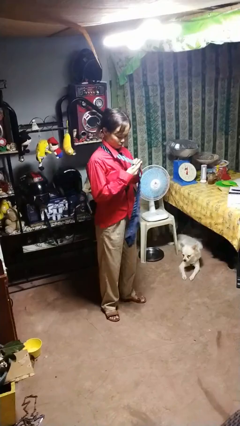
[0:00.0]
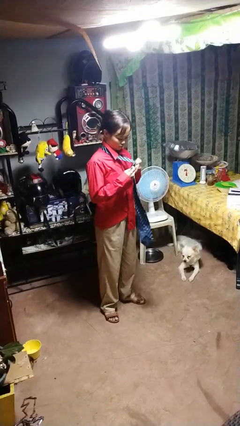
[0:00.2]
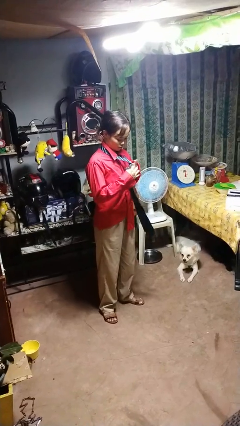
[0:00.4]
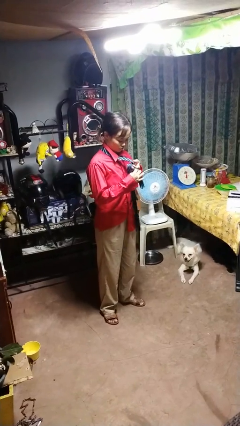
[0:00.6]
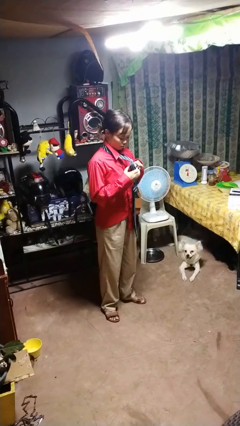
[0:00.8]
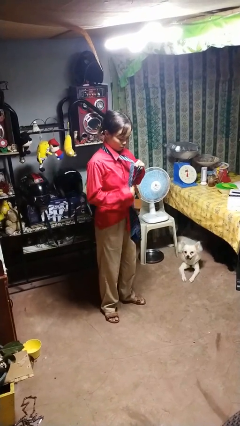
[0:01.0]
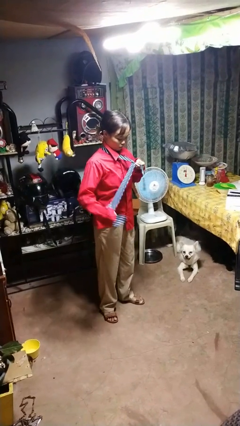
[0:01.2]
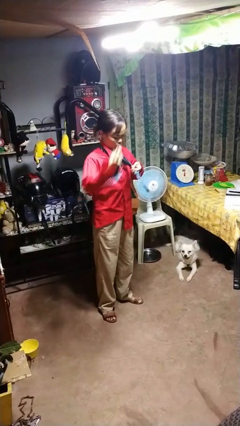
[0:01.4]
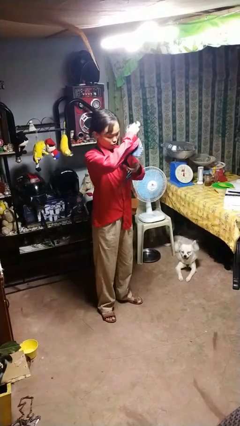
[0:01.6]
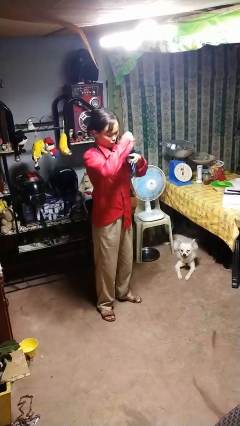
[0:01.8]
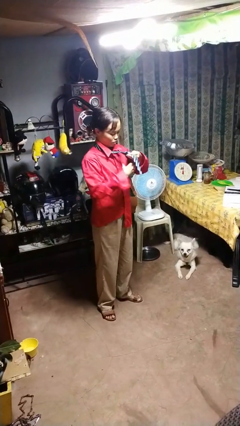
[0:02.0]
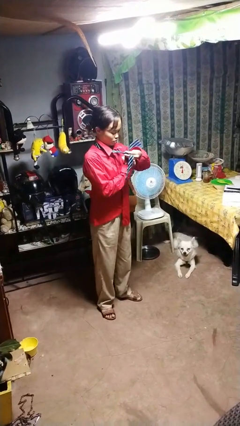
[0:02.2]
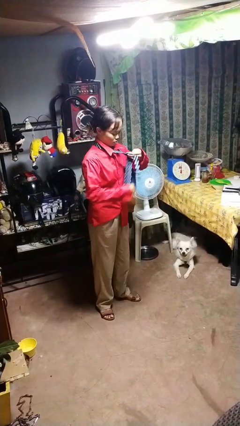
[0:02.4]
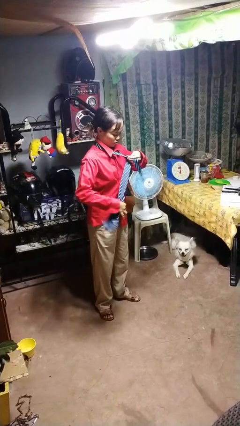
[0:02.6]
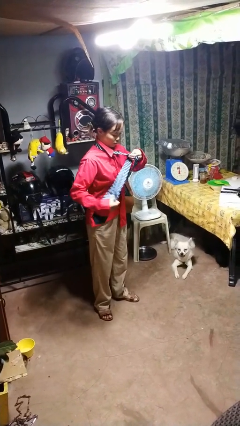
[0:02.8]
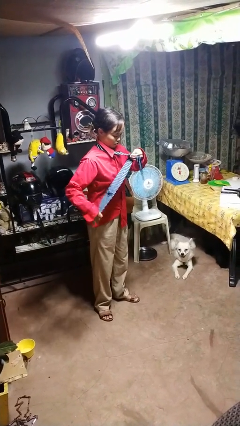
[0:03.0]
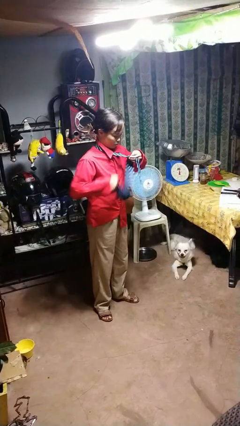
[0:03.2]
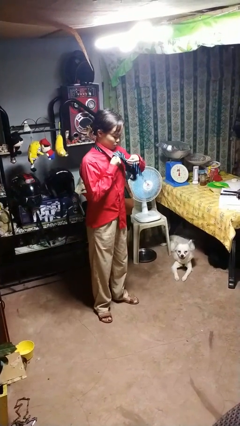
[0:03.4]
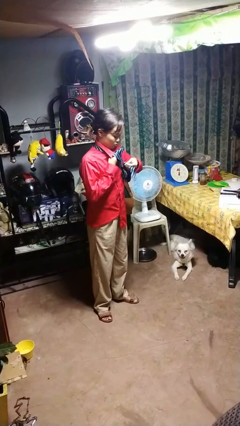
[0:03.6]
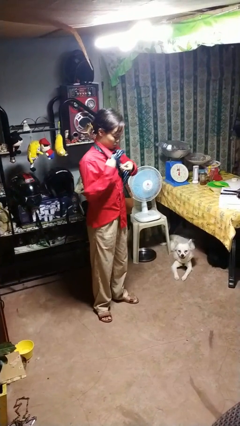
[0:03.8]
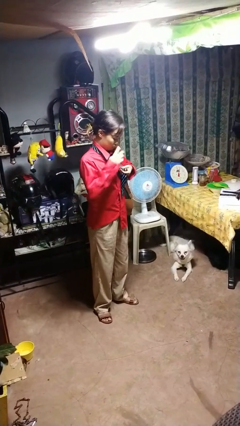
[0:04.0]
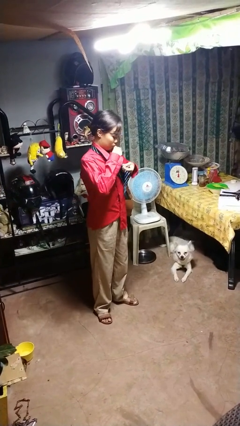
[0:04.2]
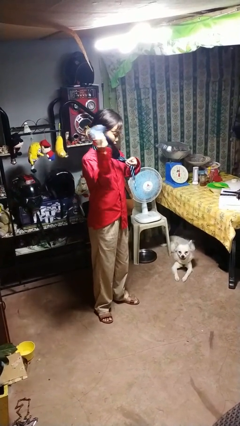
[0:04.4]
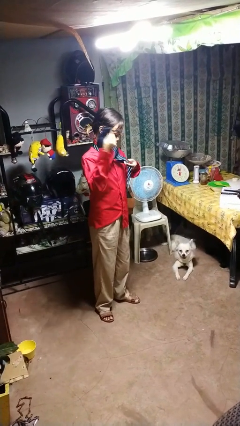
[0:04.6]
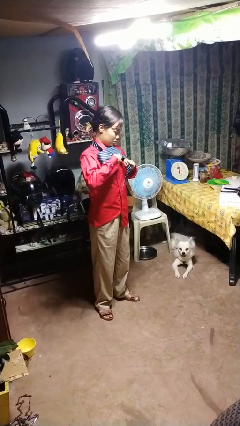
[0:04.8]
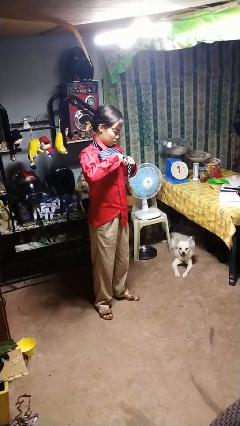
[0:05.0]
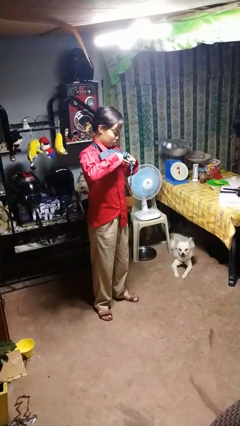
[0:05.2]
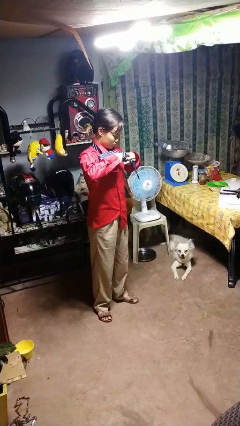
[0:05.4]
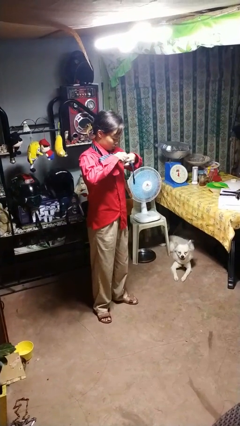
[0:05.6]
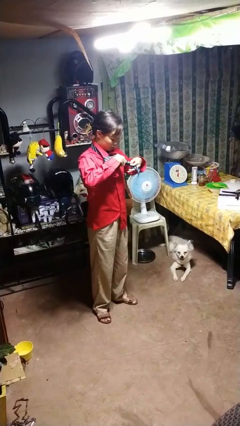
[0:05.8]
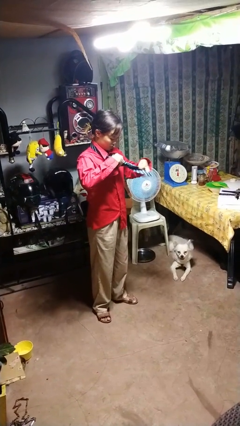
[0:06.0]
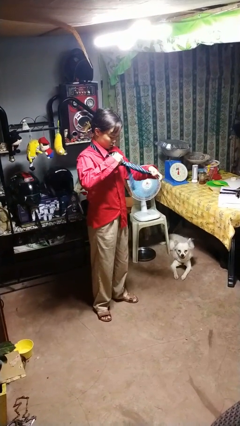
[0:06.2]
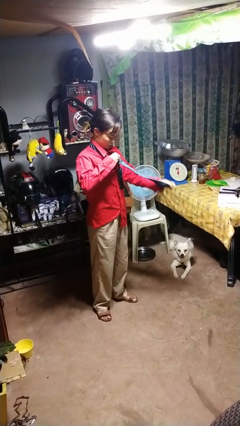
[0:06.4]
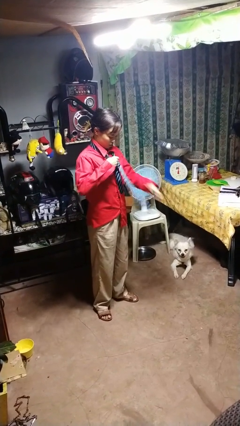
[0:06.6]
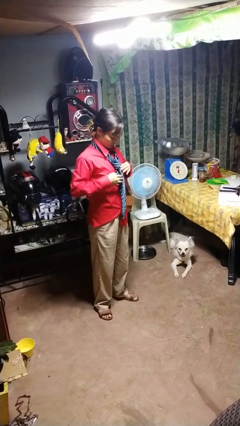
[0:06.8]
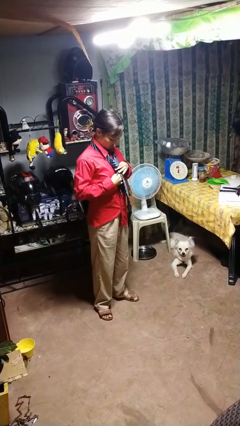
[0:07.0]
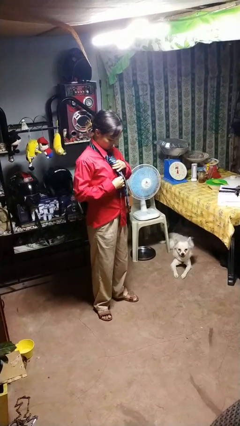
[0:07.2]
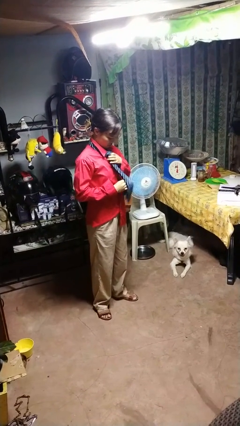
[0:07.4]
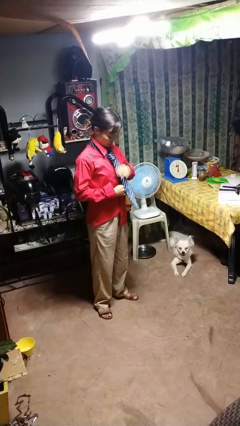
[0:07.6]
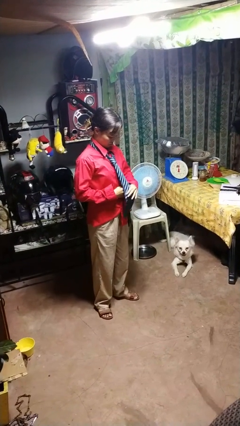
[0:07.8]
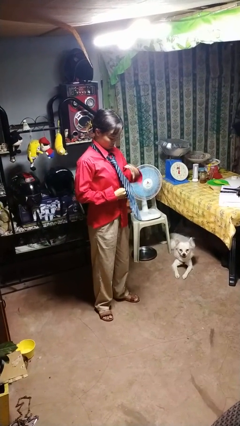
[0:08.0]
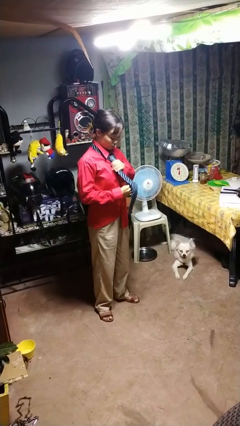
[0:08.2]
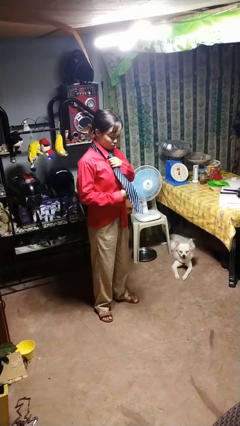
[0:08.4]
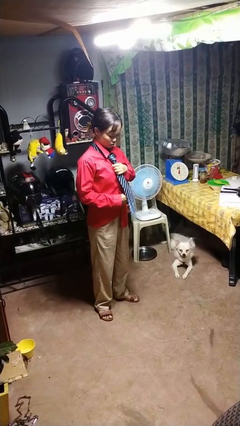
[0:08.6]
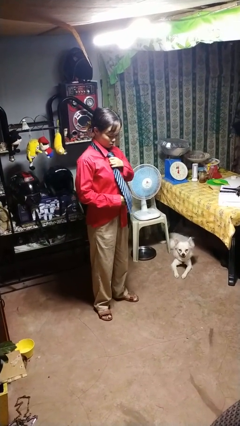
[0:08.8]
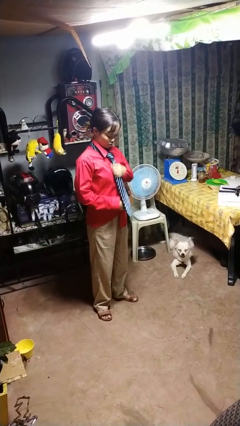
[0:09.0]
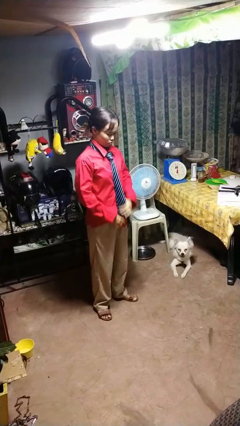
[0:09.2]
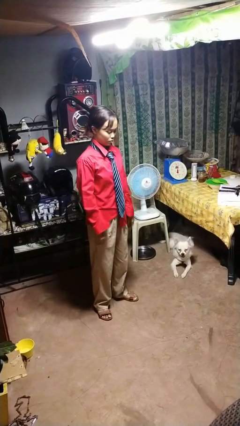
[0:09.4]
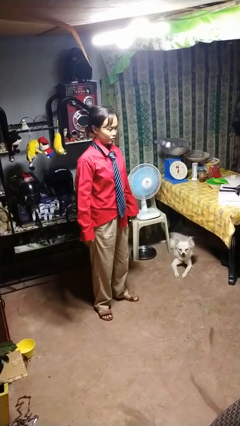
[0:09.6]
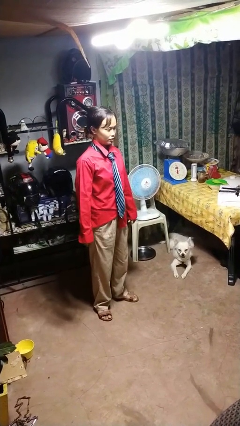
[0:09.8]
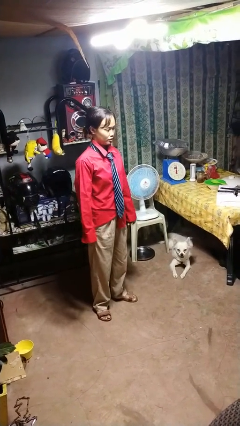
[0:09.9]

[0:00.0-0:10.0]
person puts on necktie

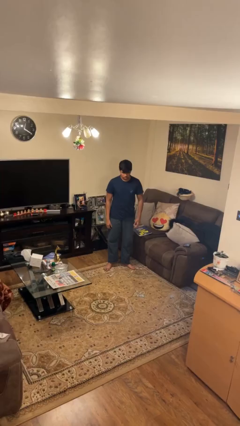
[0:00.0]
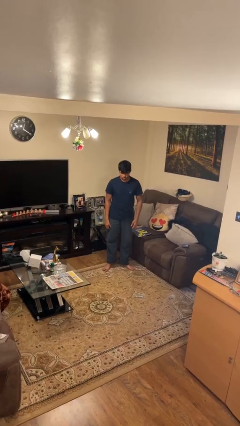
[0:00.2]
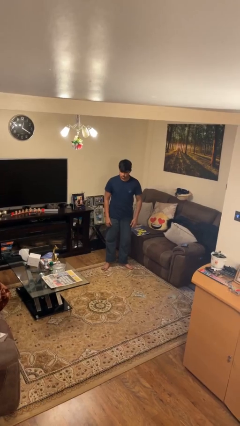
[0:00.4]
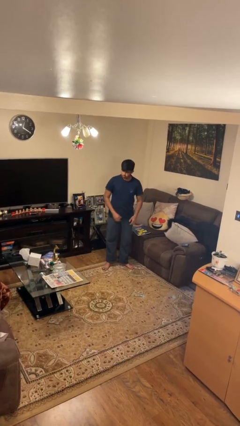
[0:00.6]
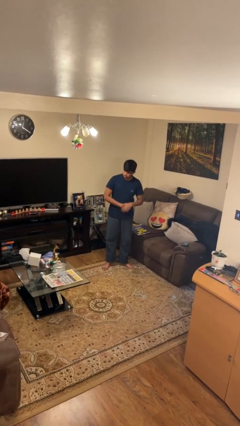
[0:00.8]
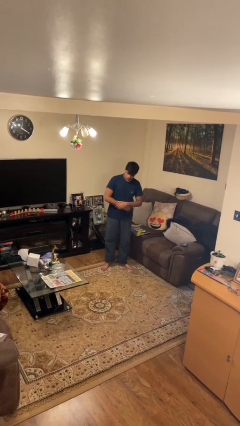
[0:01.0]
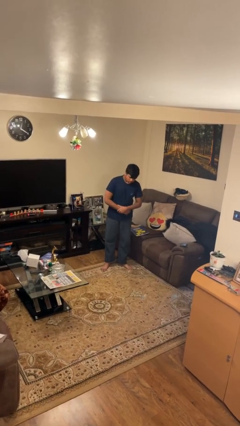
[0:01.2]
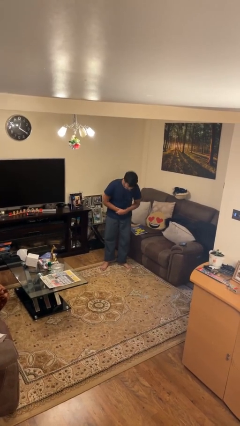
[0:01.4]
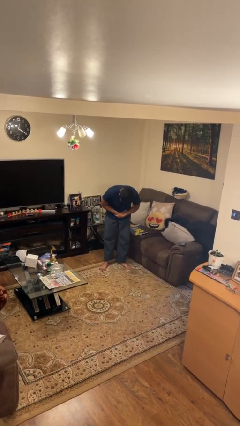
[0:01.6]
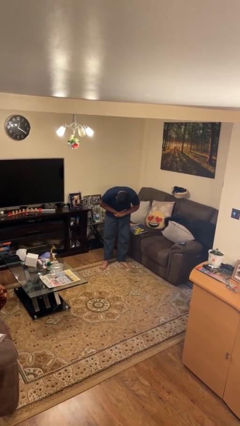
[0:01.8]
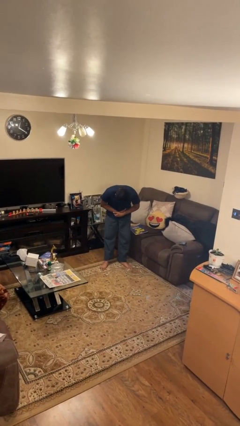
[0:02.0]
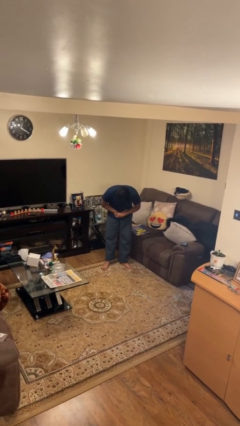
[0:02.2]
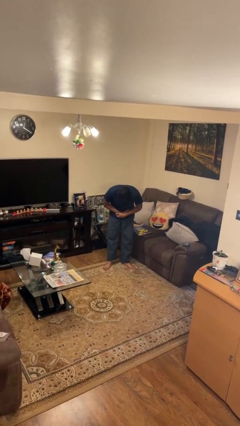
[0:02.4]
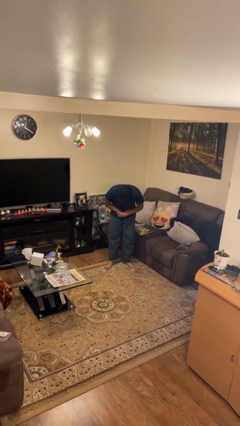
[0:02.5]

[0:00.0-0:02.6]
person bows

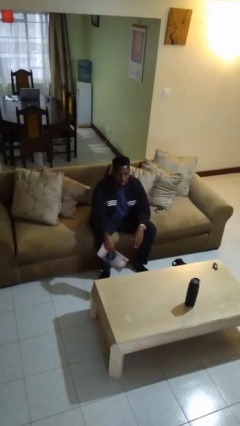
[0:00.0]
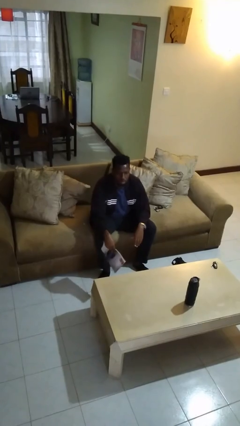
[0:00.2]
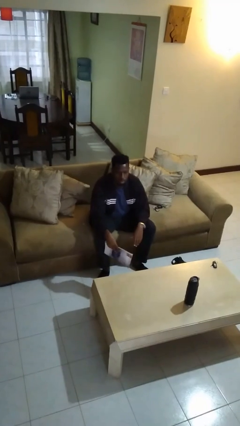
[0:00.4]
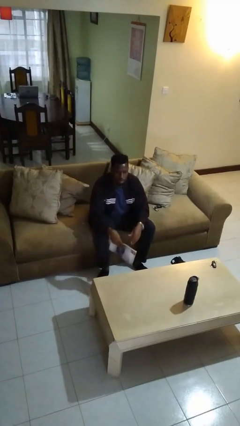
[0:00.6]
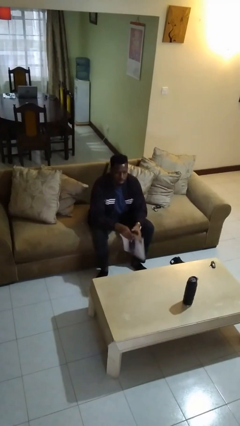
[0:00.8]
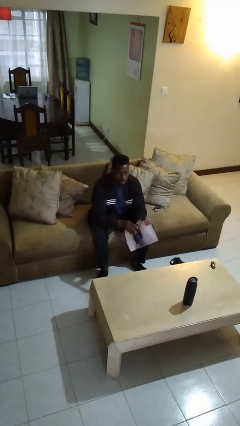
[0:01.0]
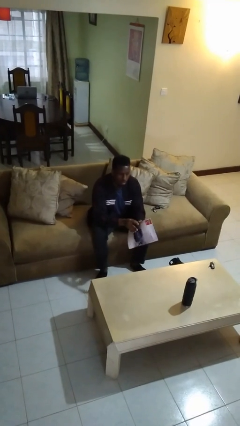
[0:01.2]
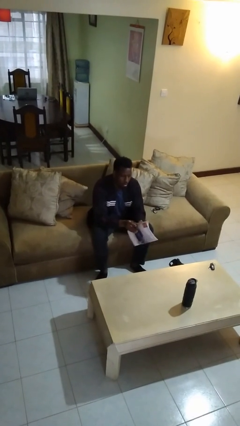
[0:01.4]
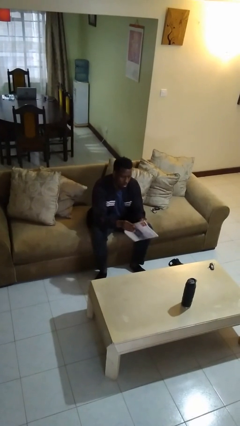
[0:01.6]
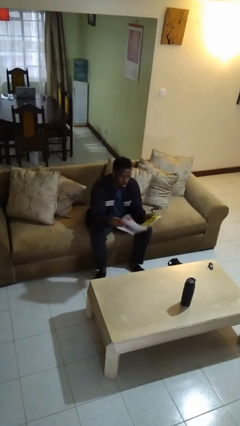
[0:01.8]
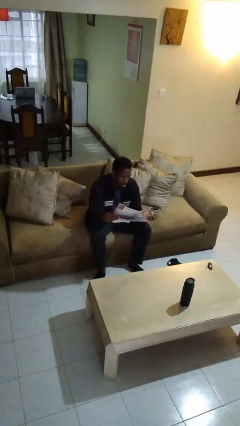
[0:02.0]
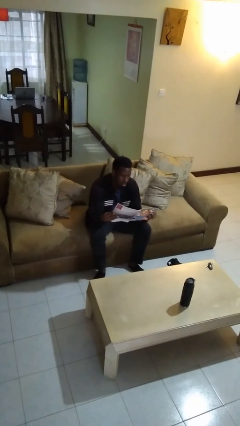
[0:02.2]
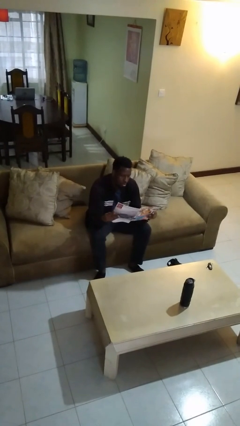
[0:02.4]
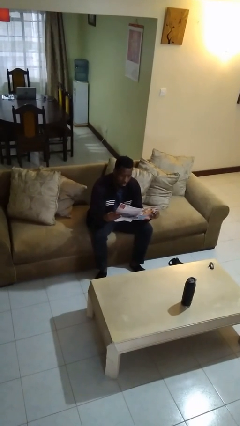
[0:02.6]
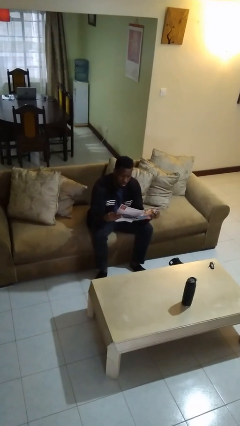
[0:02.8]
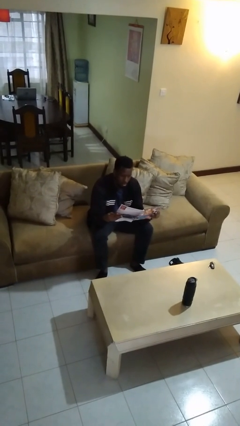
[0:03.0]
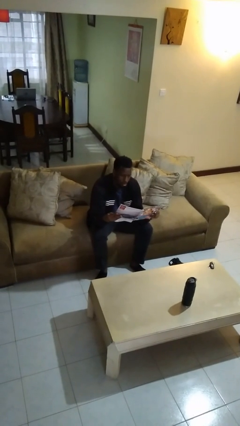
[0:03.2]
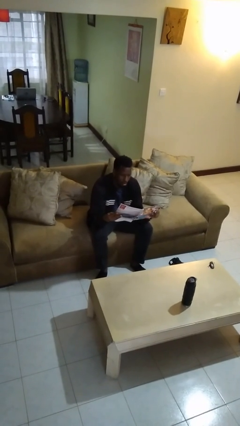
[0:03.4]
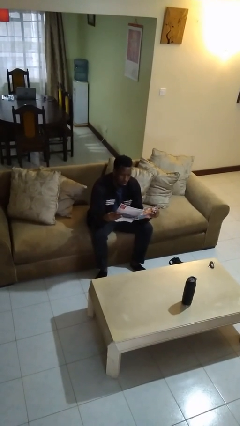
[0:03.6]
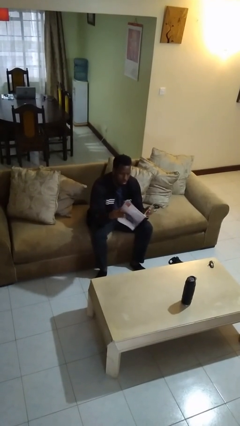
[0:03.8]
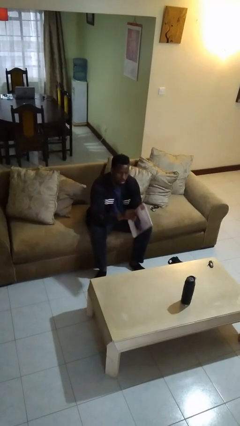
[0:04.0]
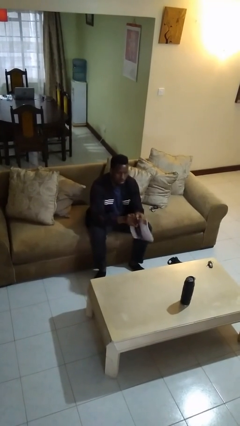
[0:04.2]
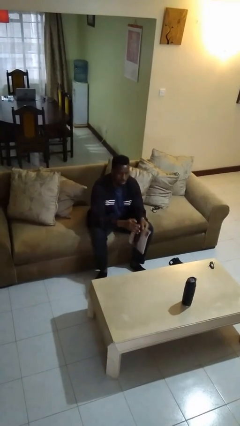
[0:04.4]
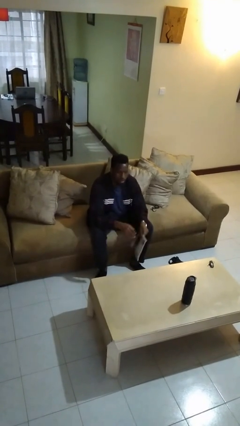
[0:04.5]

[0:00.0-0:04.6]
person reads magazine

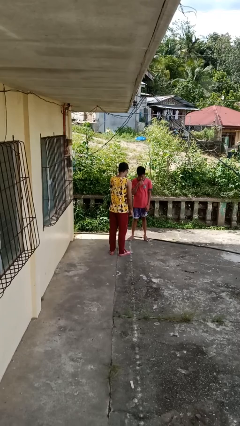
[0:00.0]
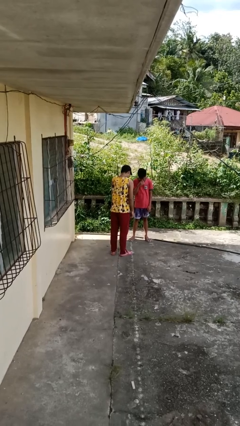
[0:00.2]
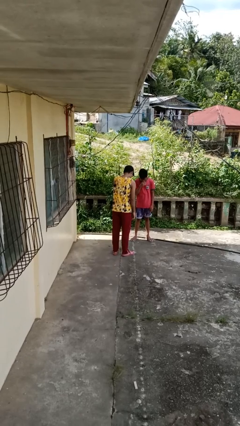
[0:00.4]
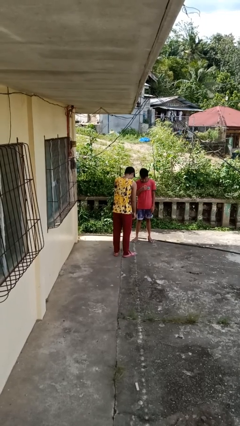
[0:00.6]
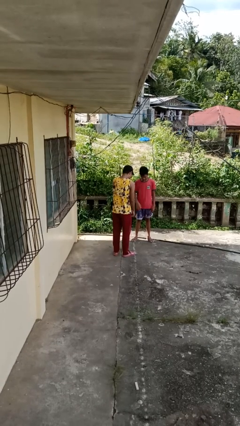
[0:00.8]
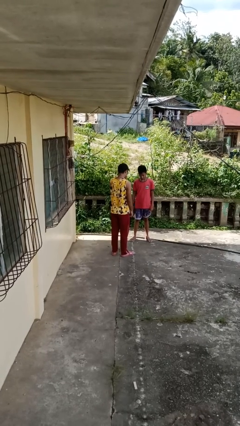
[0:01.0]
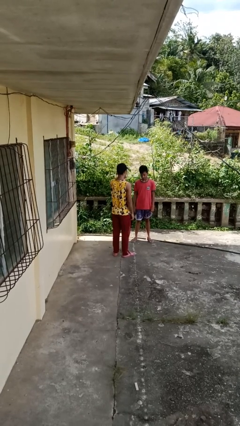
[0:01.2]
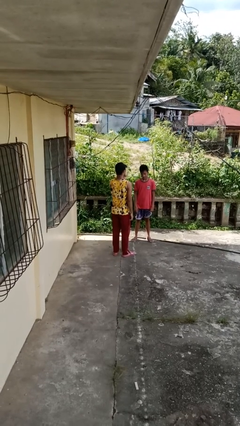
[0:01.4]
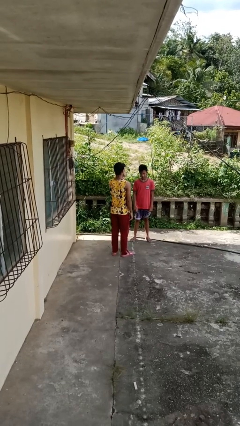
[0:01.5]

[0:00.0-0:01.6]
person laughs with person
